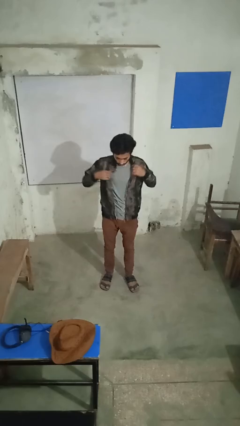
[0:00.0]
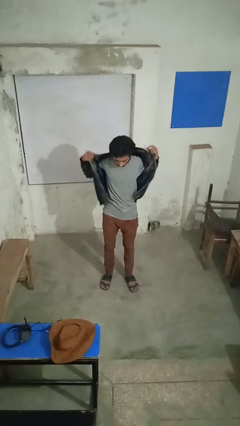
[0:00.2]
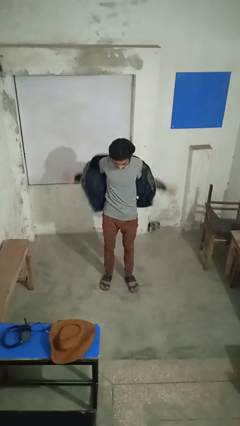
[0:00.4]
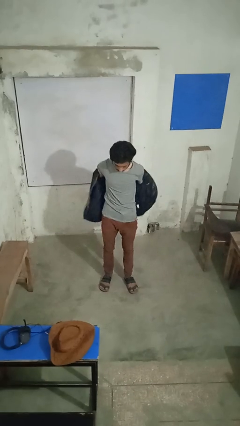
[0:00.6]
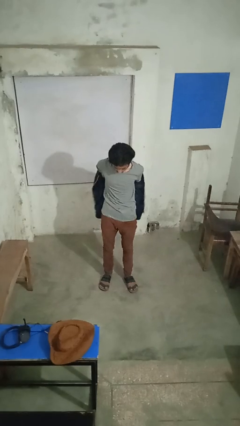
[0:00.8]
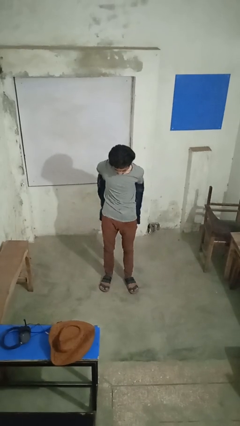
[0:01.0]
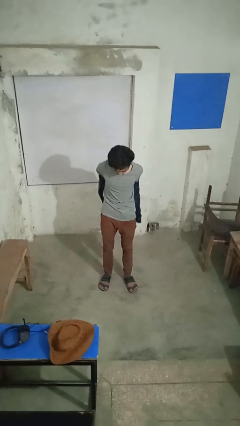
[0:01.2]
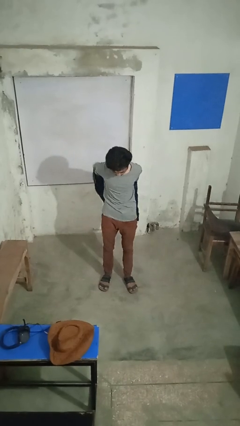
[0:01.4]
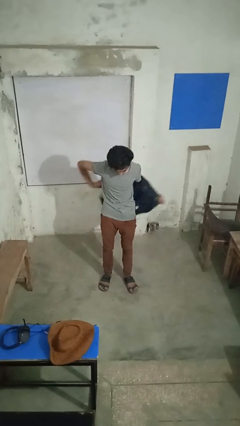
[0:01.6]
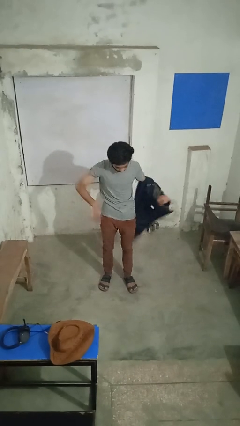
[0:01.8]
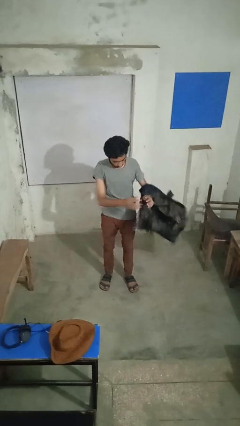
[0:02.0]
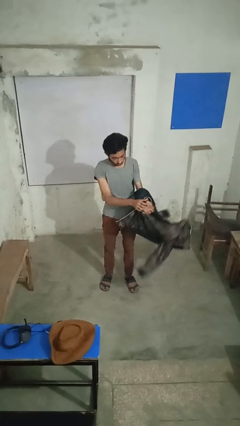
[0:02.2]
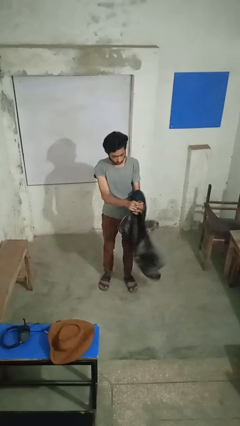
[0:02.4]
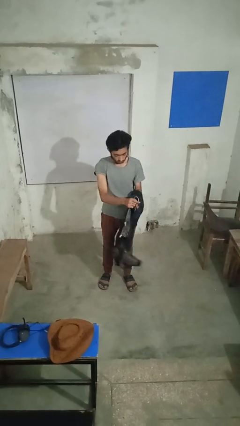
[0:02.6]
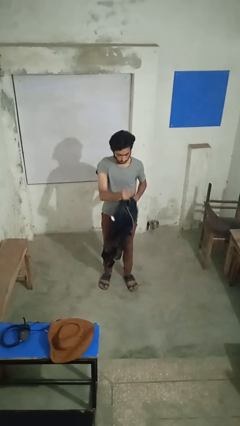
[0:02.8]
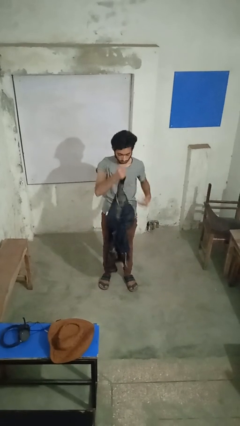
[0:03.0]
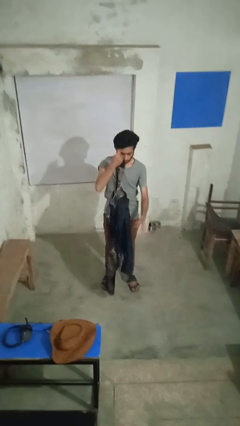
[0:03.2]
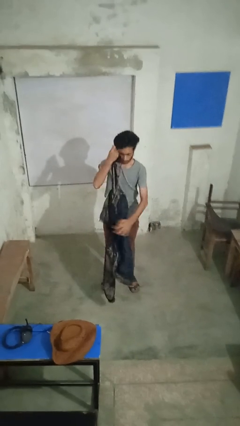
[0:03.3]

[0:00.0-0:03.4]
person takes off jacket

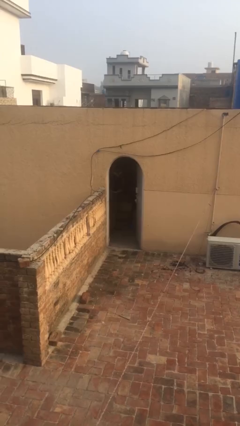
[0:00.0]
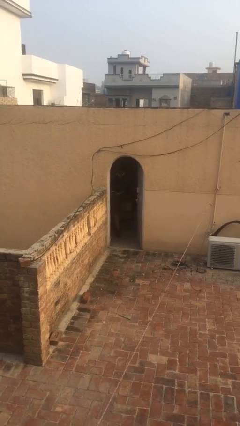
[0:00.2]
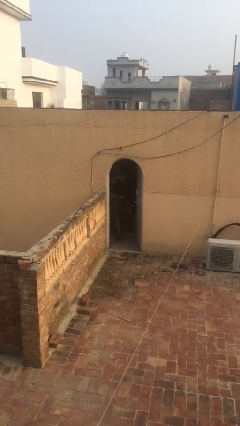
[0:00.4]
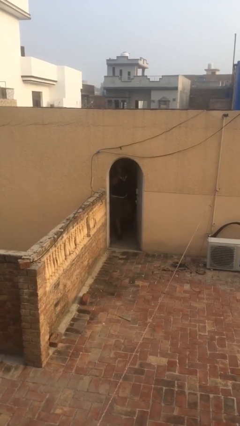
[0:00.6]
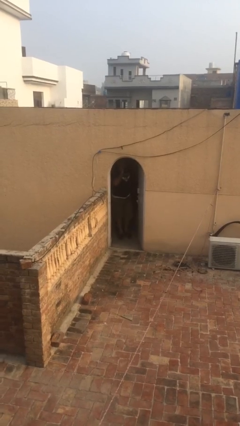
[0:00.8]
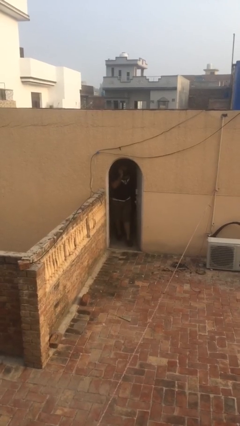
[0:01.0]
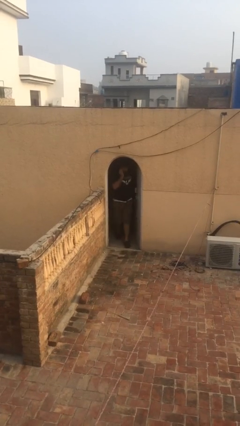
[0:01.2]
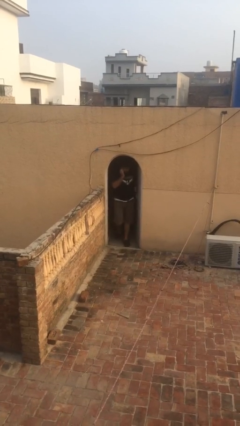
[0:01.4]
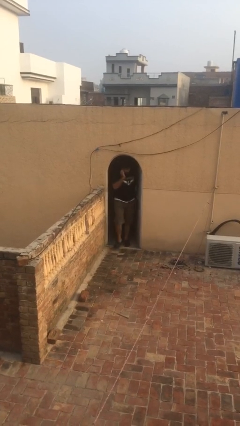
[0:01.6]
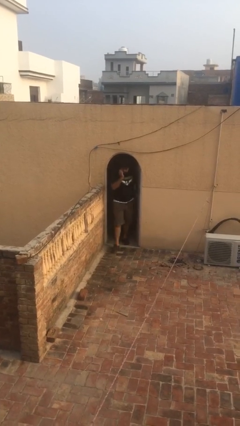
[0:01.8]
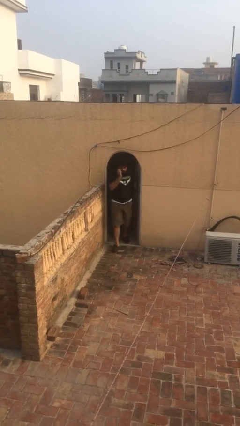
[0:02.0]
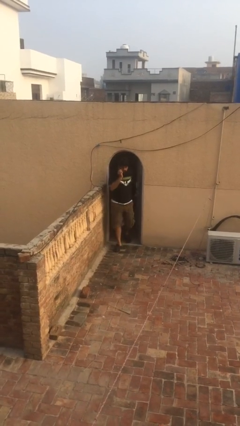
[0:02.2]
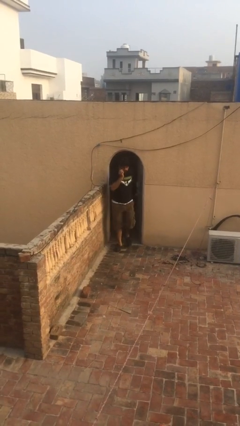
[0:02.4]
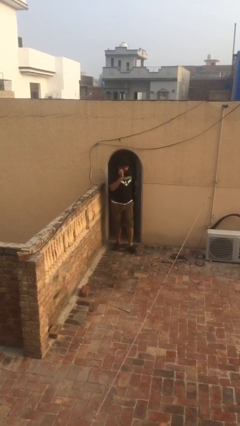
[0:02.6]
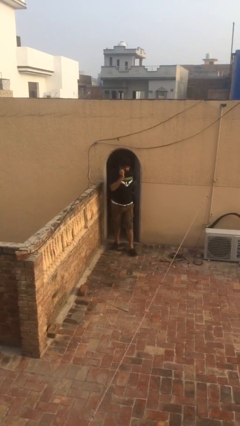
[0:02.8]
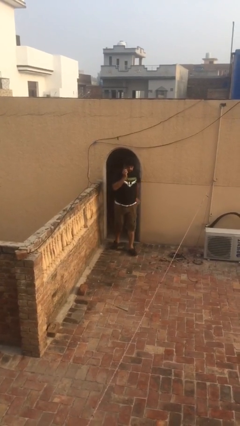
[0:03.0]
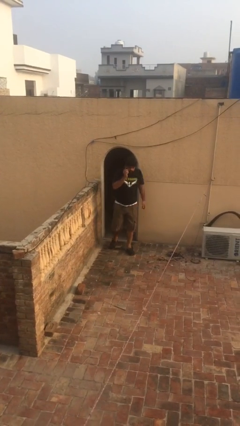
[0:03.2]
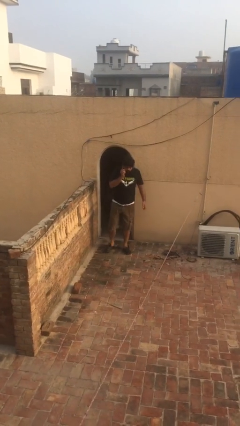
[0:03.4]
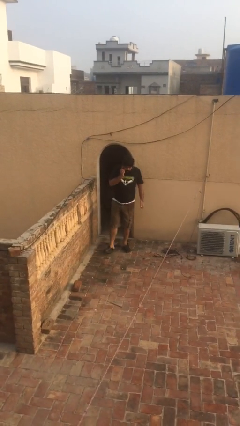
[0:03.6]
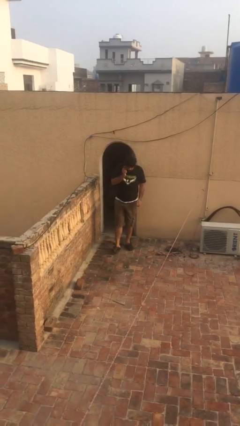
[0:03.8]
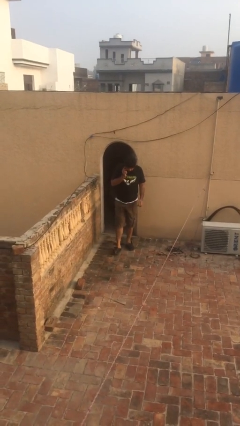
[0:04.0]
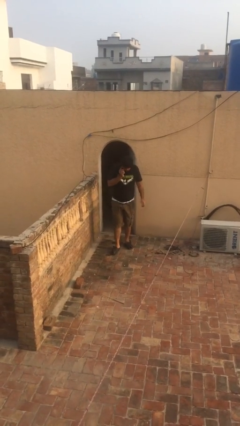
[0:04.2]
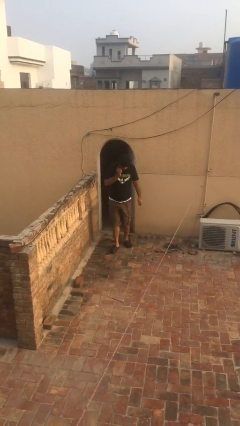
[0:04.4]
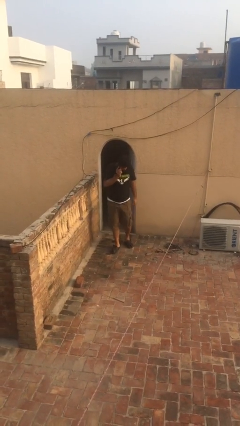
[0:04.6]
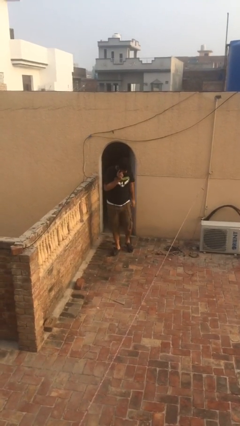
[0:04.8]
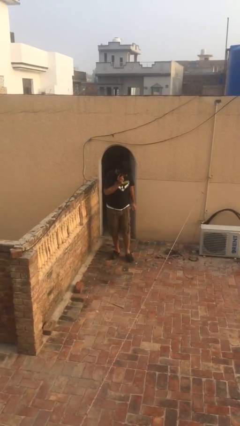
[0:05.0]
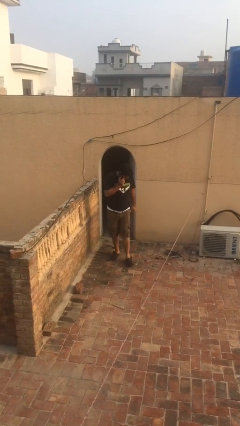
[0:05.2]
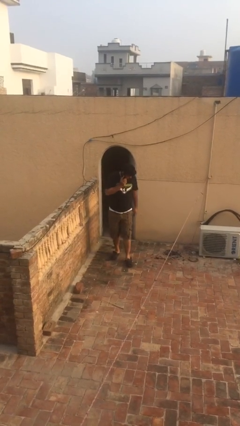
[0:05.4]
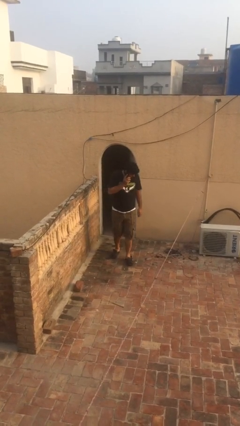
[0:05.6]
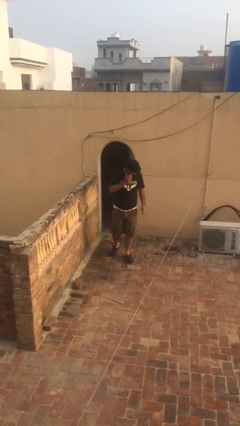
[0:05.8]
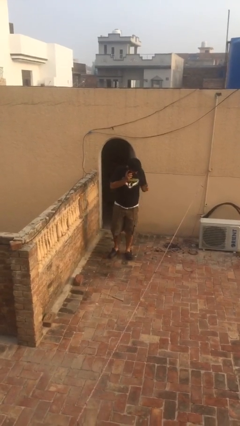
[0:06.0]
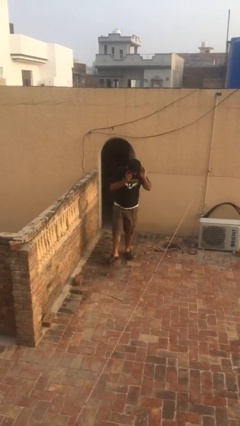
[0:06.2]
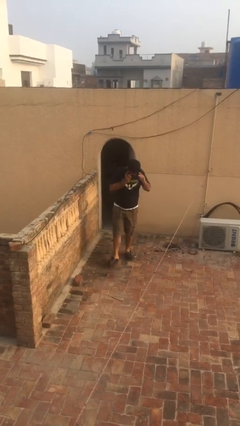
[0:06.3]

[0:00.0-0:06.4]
person enters scene through structure

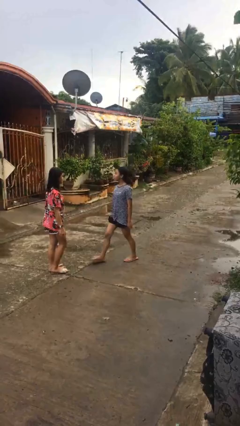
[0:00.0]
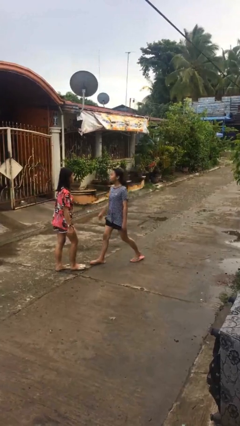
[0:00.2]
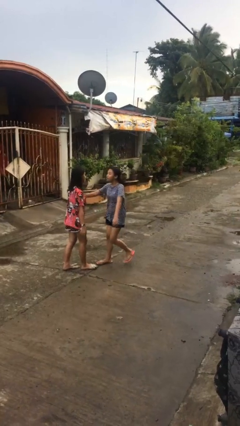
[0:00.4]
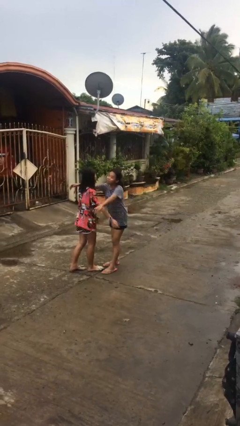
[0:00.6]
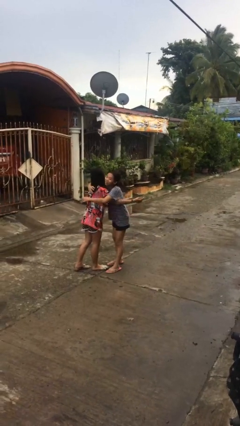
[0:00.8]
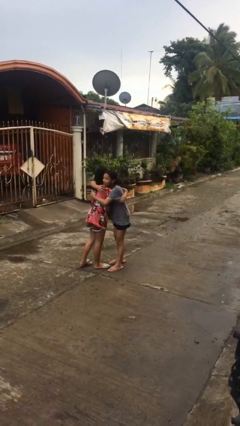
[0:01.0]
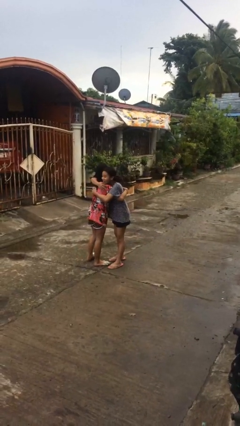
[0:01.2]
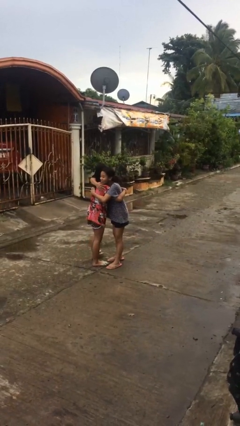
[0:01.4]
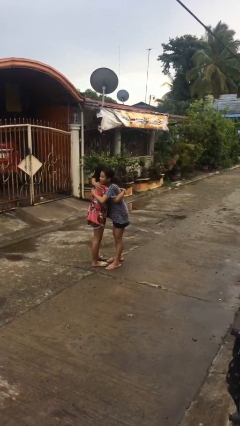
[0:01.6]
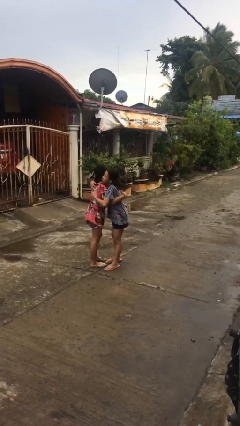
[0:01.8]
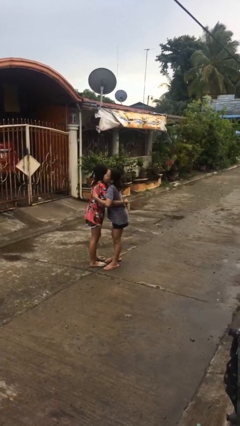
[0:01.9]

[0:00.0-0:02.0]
person embraces person

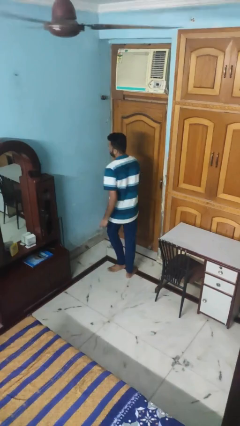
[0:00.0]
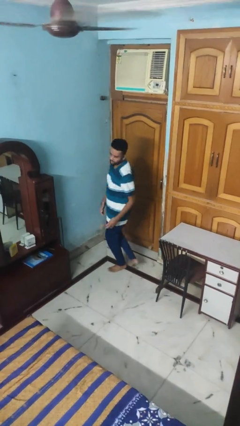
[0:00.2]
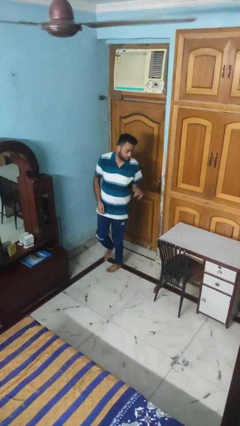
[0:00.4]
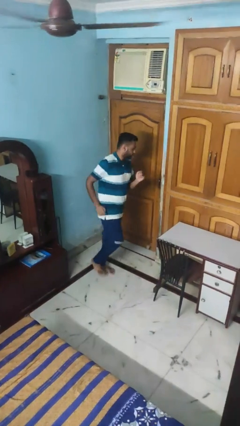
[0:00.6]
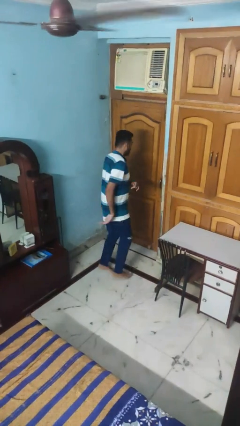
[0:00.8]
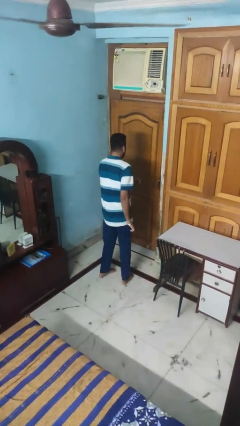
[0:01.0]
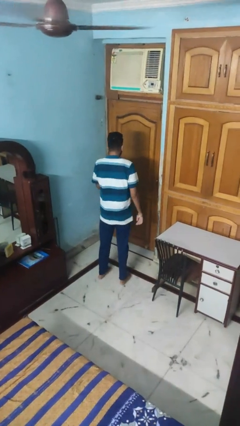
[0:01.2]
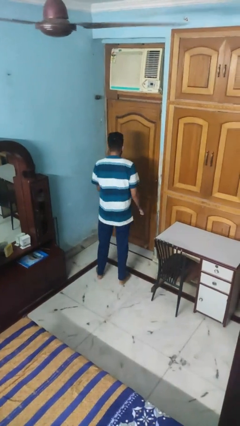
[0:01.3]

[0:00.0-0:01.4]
person twirls

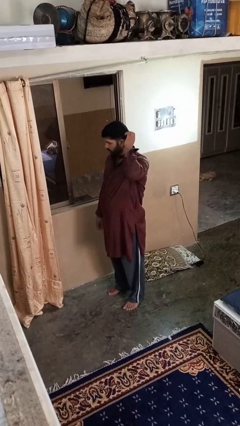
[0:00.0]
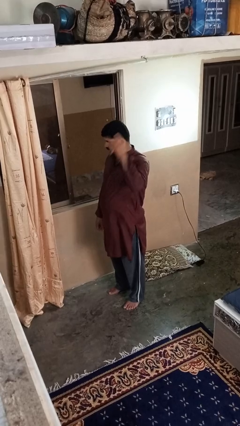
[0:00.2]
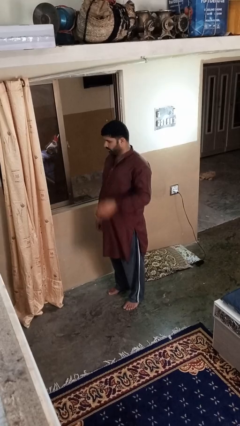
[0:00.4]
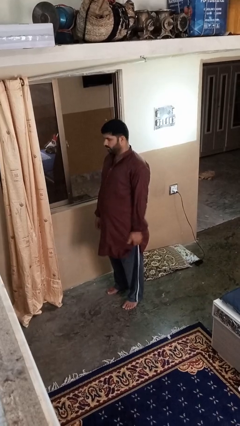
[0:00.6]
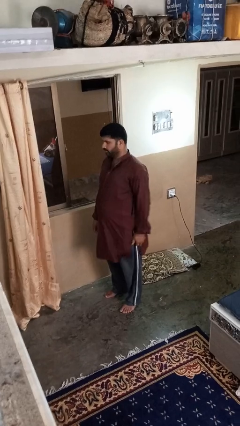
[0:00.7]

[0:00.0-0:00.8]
person strokes hair

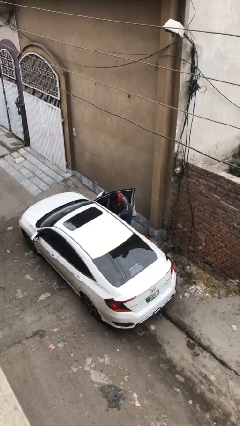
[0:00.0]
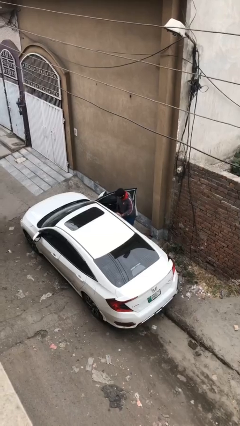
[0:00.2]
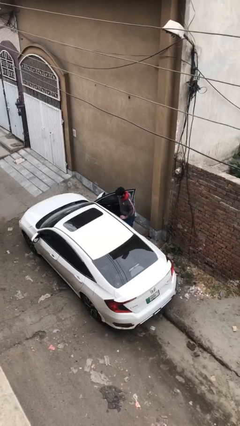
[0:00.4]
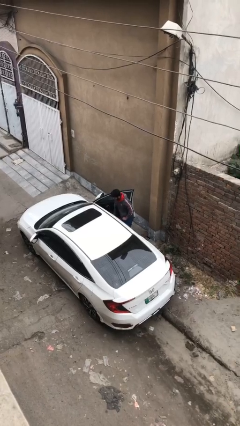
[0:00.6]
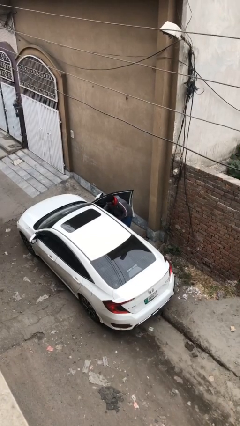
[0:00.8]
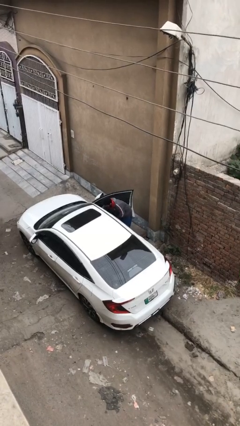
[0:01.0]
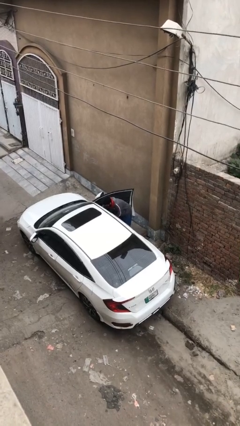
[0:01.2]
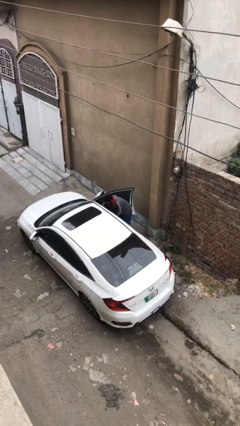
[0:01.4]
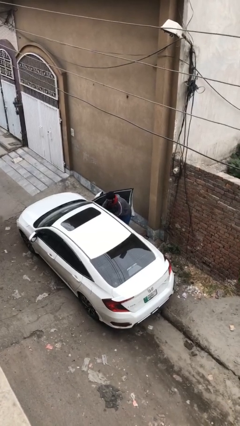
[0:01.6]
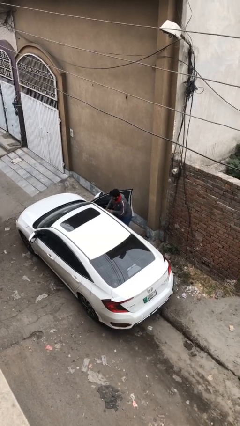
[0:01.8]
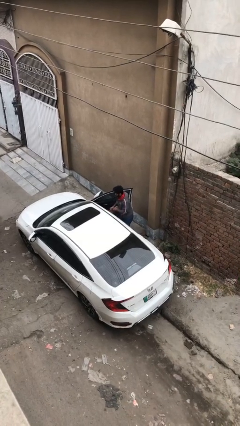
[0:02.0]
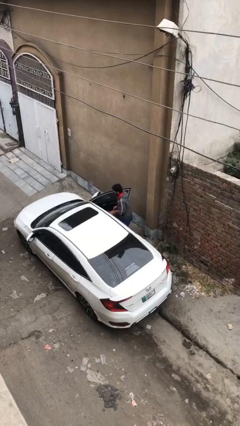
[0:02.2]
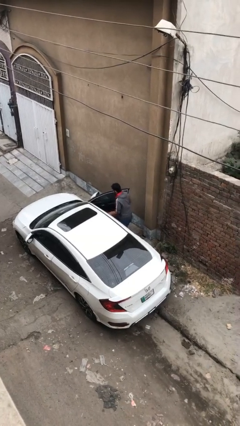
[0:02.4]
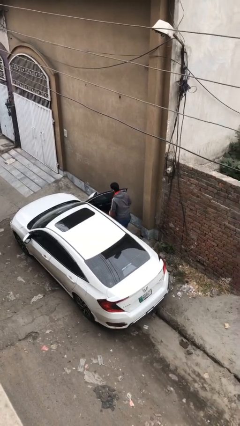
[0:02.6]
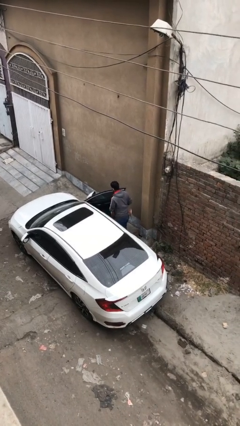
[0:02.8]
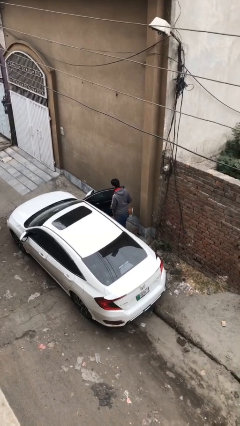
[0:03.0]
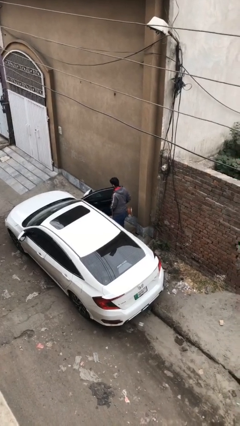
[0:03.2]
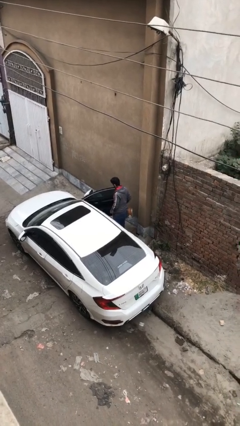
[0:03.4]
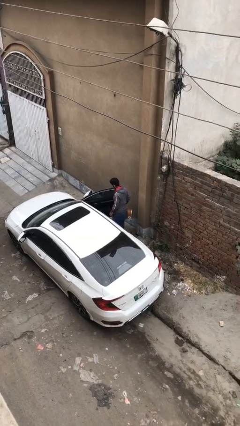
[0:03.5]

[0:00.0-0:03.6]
person unloads car
